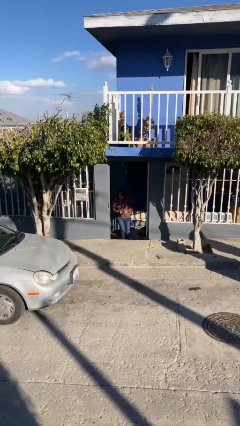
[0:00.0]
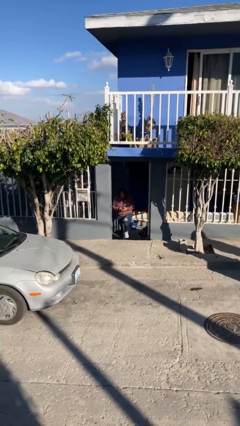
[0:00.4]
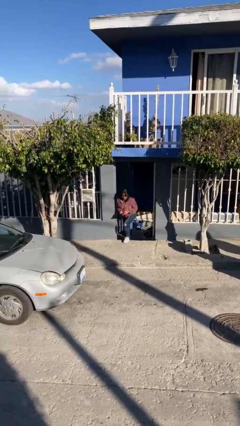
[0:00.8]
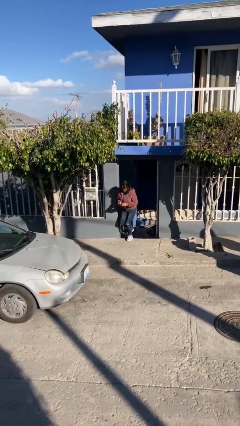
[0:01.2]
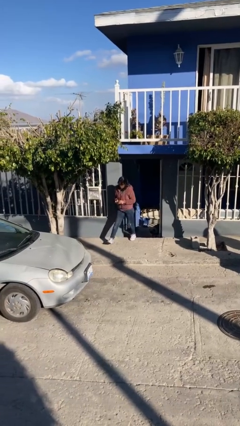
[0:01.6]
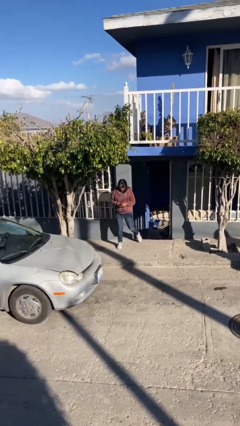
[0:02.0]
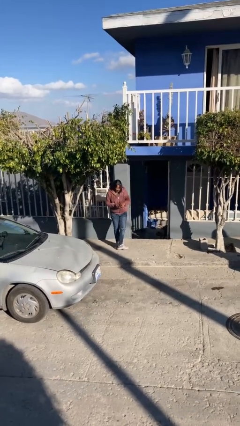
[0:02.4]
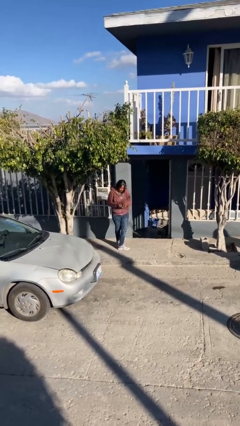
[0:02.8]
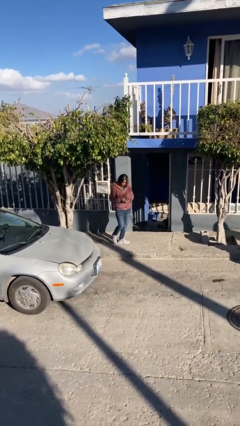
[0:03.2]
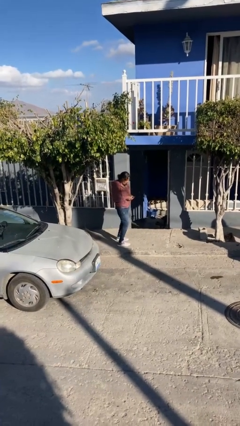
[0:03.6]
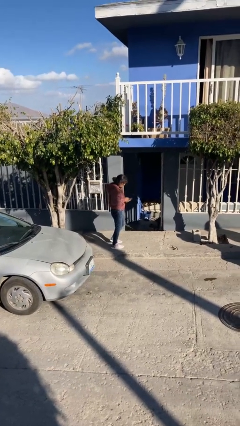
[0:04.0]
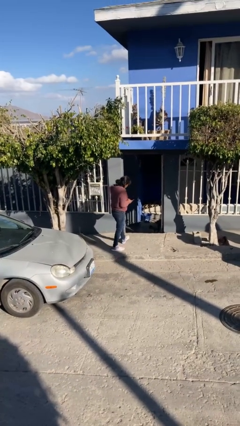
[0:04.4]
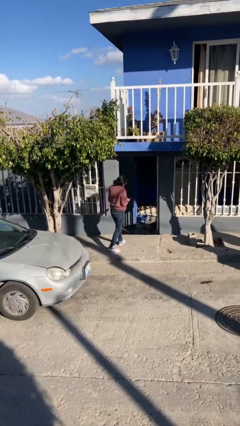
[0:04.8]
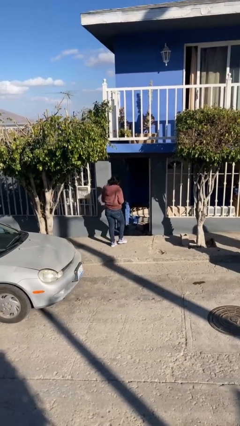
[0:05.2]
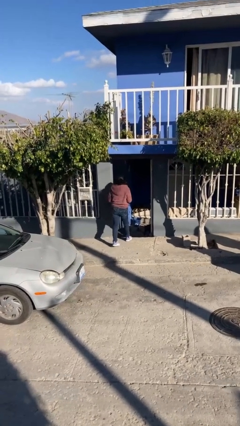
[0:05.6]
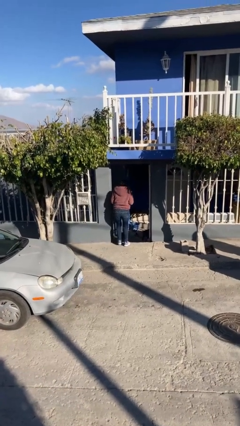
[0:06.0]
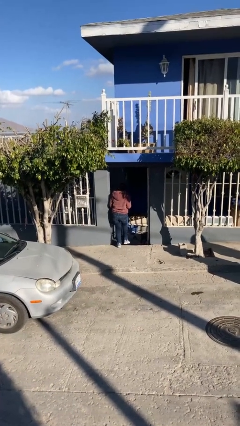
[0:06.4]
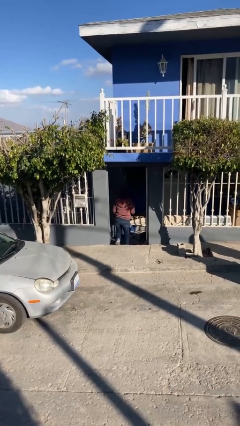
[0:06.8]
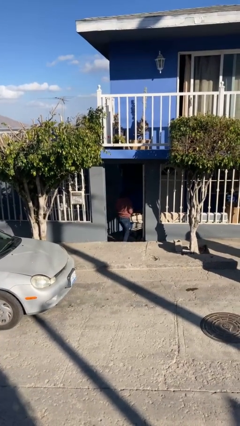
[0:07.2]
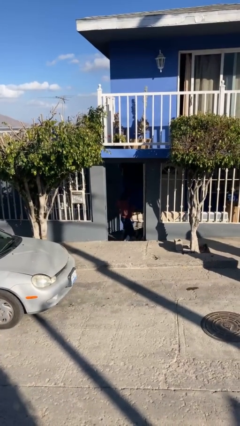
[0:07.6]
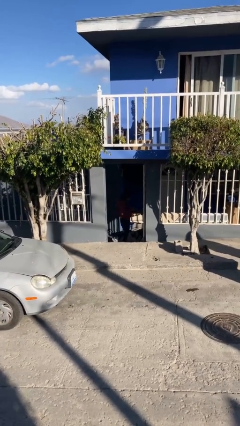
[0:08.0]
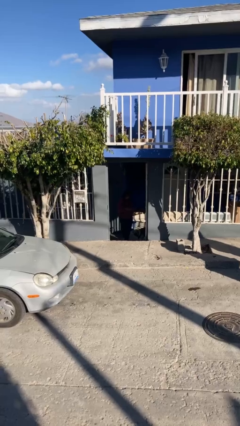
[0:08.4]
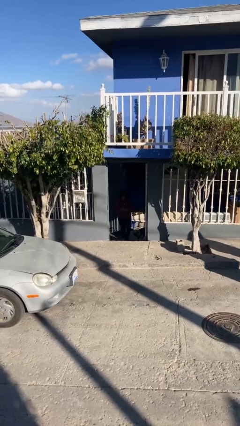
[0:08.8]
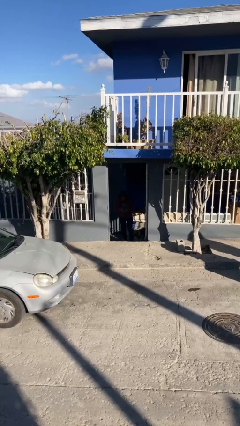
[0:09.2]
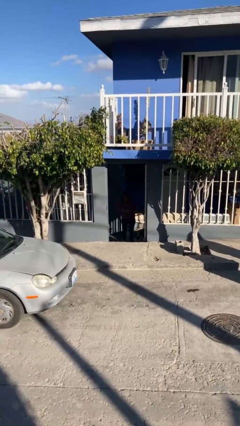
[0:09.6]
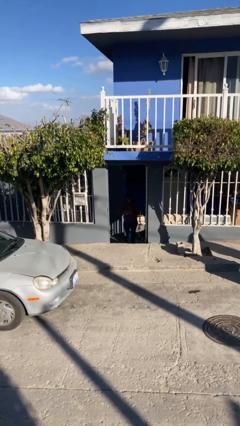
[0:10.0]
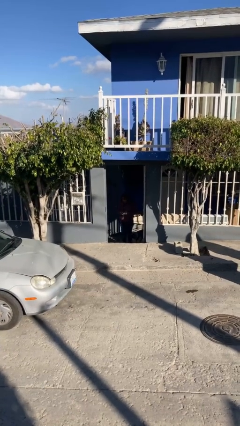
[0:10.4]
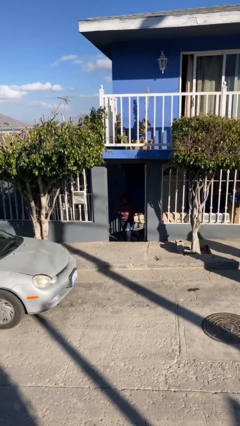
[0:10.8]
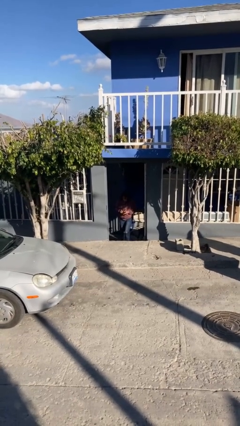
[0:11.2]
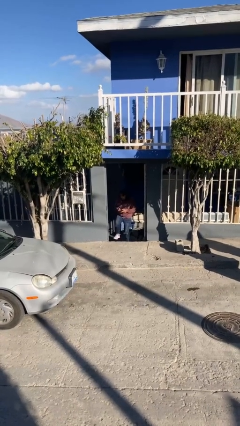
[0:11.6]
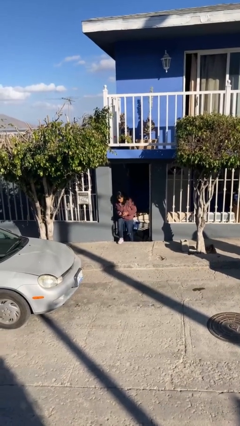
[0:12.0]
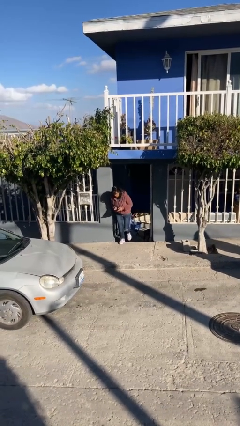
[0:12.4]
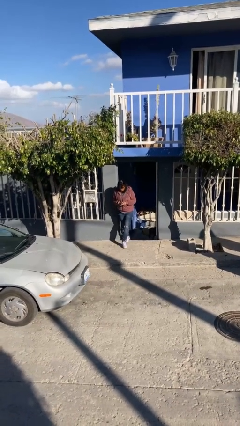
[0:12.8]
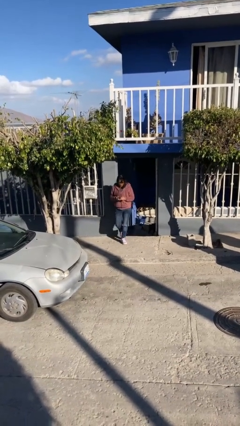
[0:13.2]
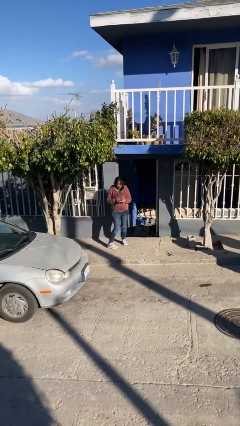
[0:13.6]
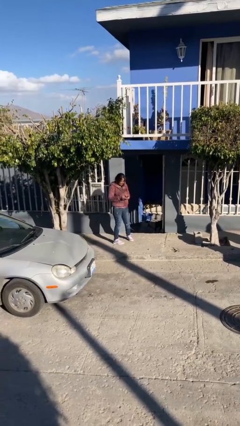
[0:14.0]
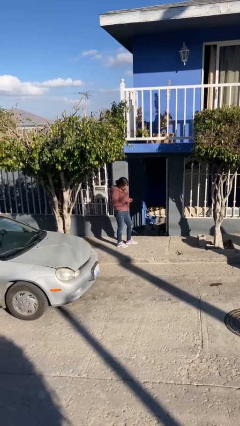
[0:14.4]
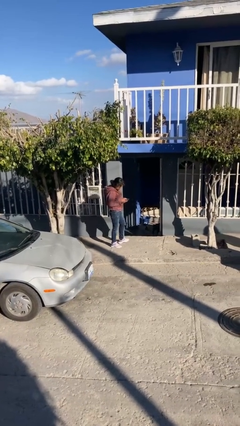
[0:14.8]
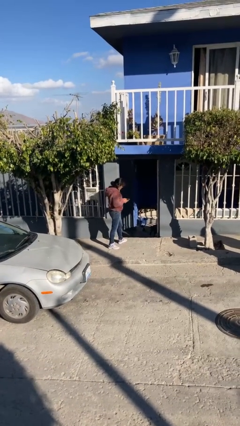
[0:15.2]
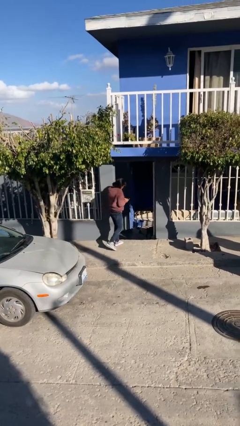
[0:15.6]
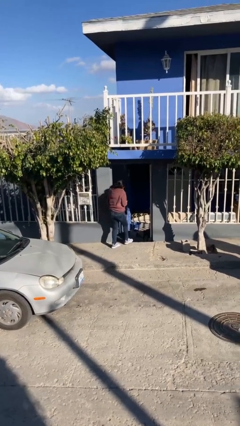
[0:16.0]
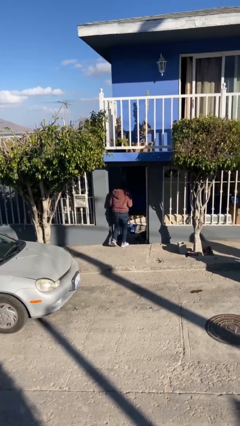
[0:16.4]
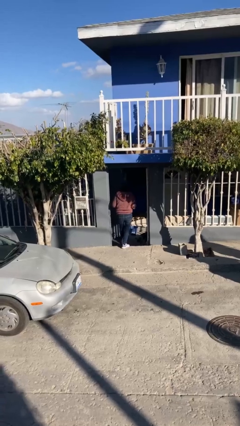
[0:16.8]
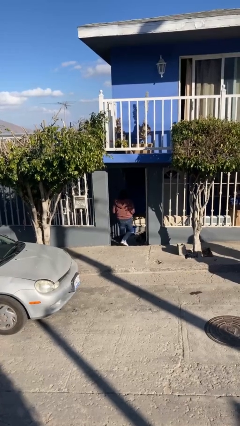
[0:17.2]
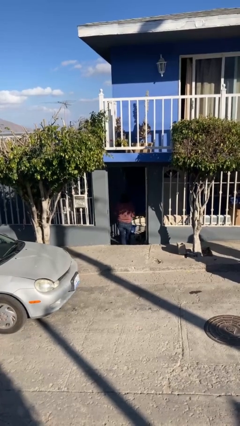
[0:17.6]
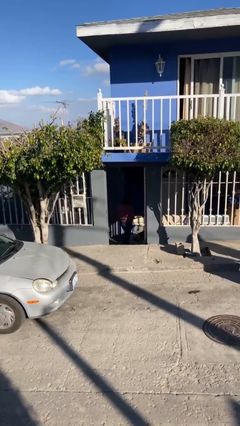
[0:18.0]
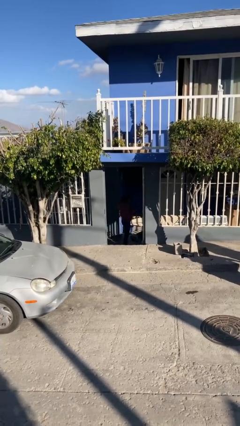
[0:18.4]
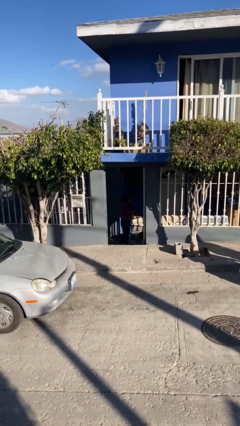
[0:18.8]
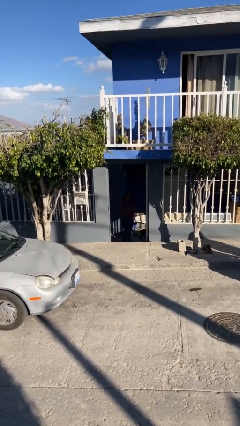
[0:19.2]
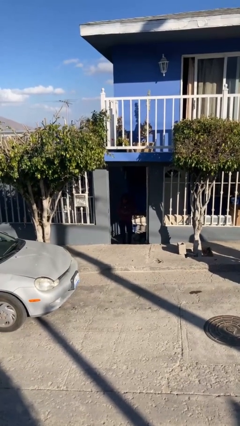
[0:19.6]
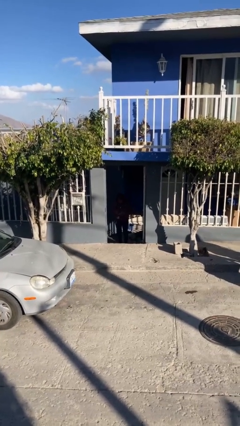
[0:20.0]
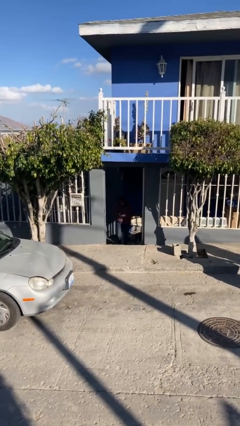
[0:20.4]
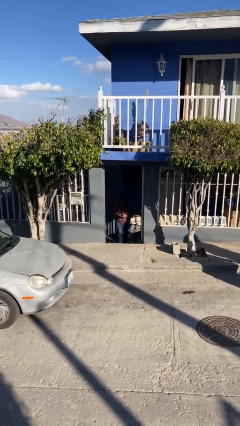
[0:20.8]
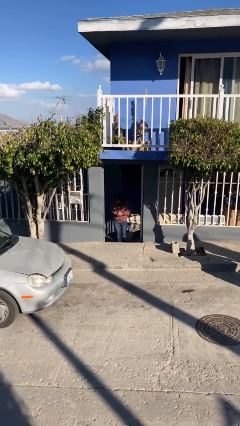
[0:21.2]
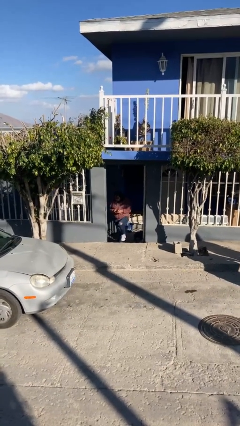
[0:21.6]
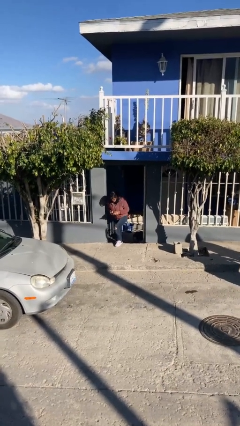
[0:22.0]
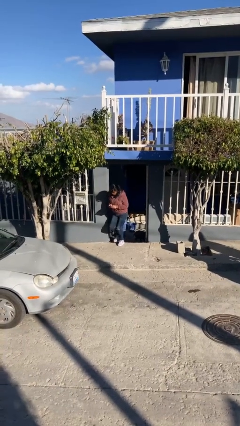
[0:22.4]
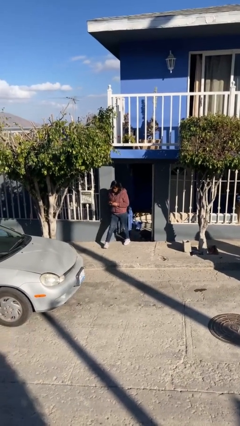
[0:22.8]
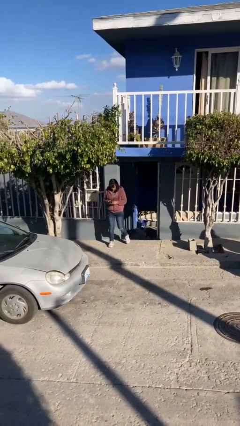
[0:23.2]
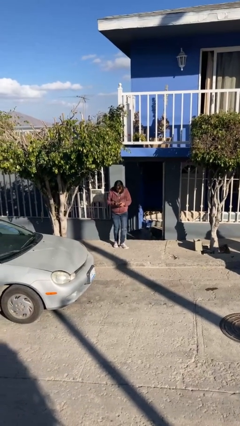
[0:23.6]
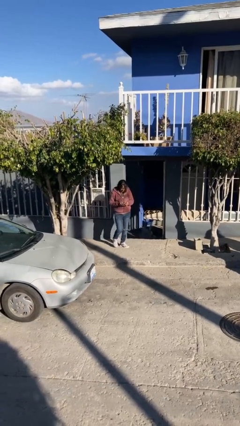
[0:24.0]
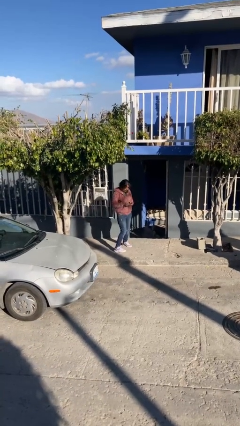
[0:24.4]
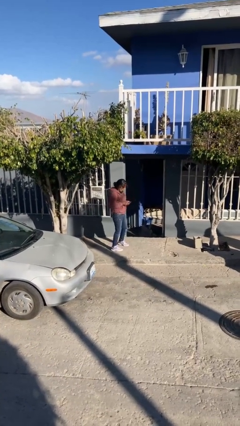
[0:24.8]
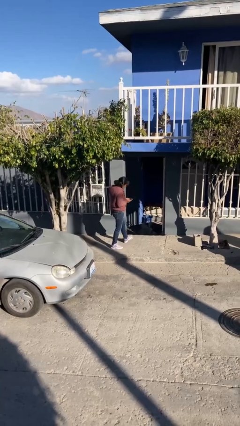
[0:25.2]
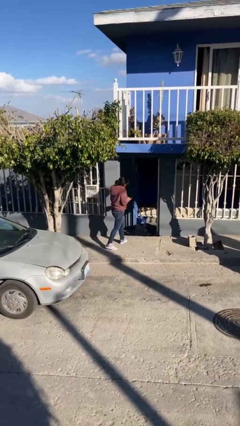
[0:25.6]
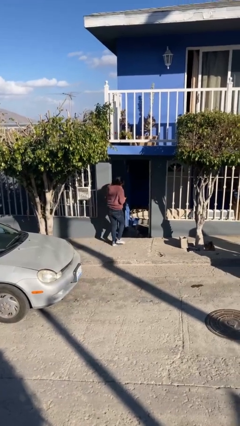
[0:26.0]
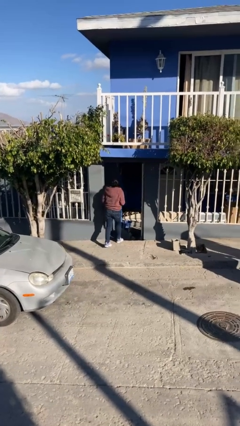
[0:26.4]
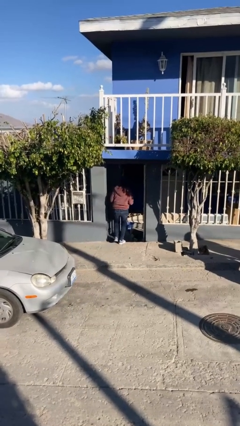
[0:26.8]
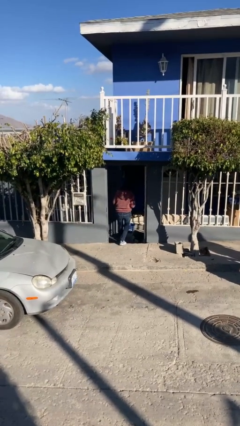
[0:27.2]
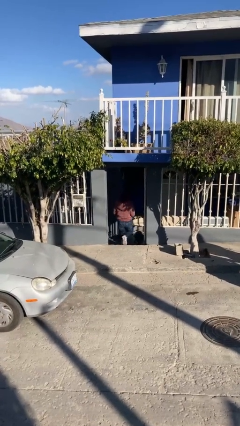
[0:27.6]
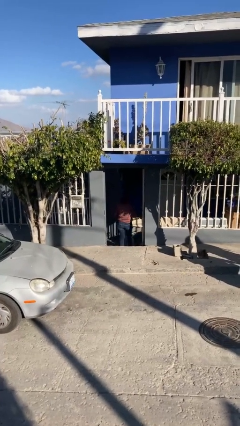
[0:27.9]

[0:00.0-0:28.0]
person texts on phone

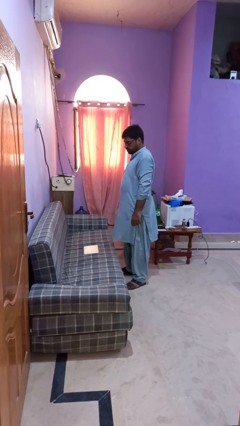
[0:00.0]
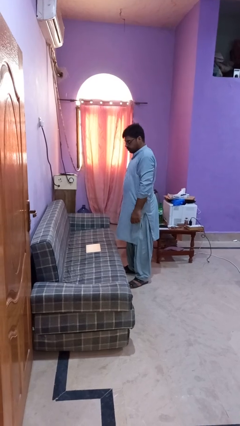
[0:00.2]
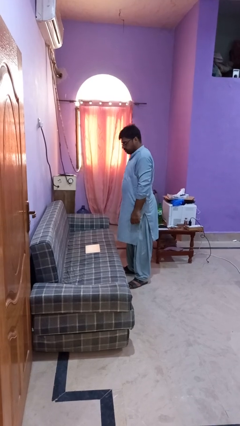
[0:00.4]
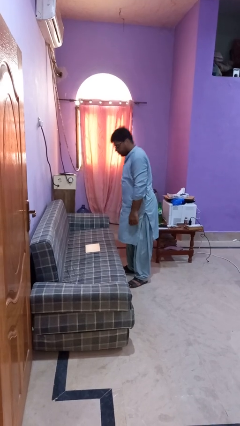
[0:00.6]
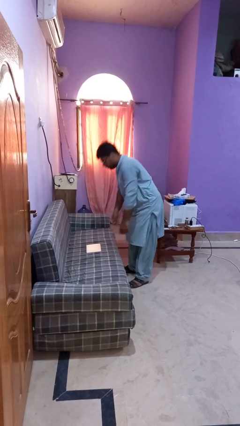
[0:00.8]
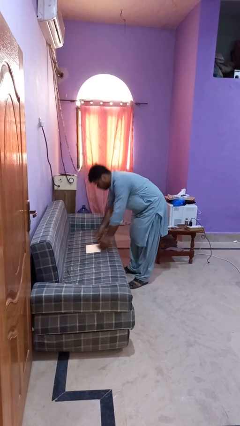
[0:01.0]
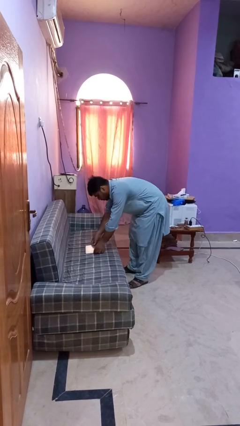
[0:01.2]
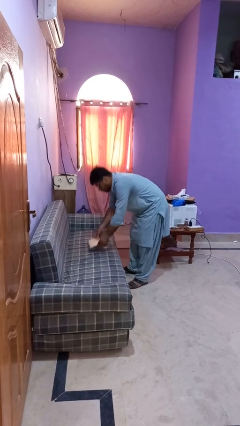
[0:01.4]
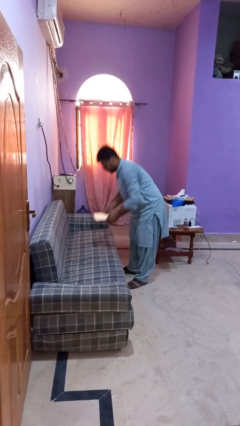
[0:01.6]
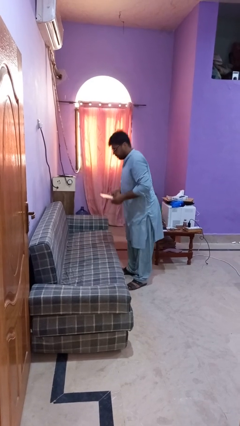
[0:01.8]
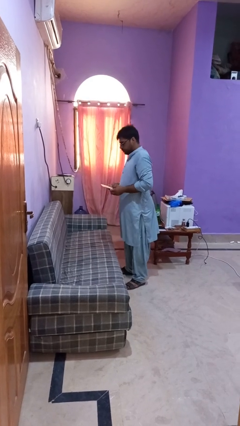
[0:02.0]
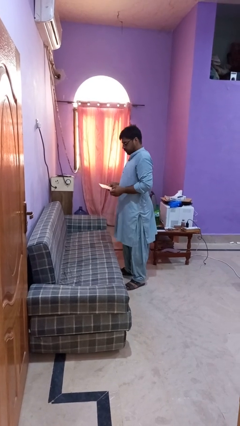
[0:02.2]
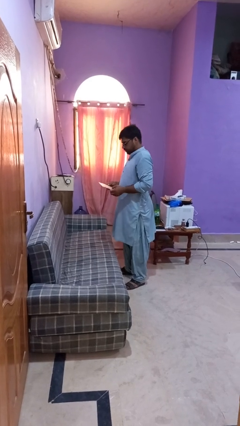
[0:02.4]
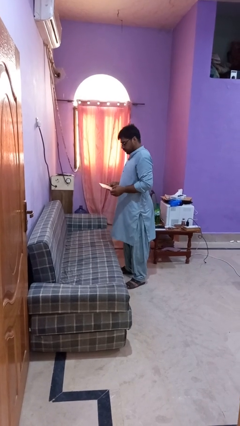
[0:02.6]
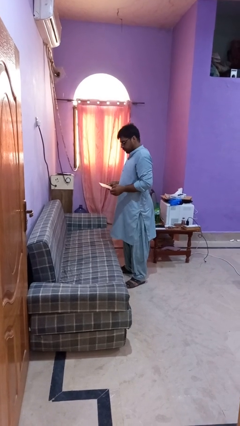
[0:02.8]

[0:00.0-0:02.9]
person picks up object from couch

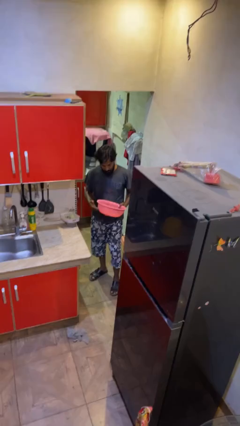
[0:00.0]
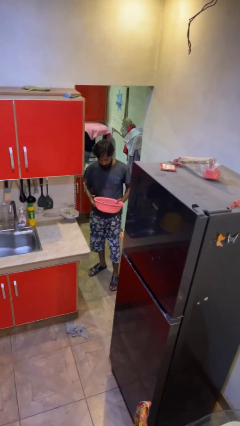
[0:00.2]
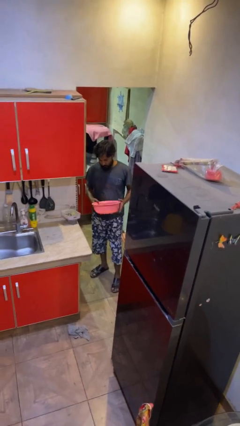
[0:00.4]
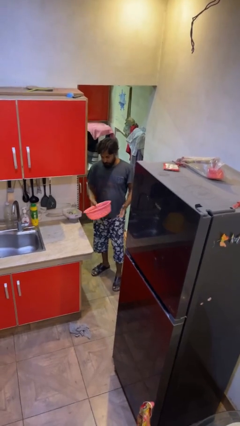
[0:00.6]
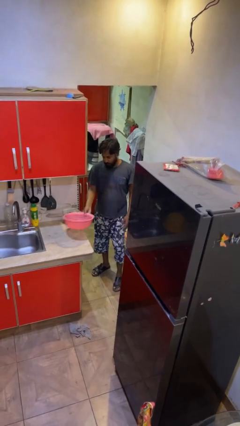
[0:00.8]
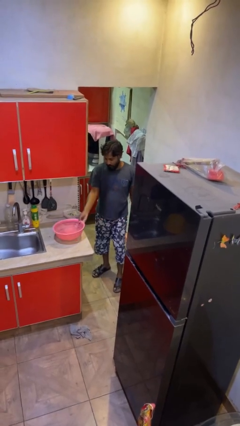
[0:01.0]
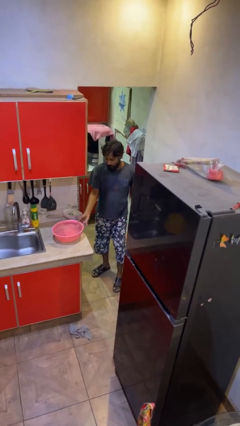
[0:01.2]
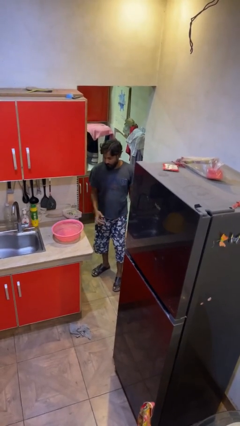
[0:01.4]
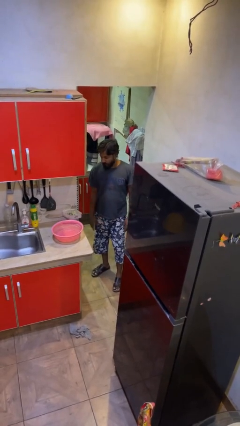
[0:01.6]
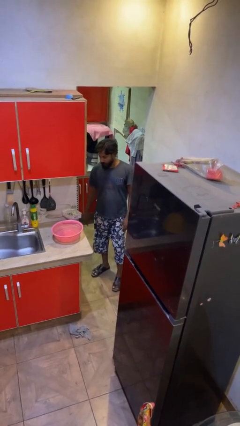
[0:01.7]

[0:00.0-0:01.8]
person puts down object on countertop
